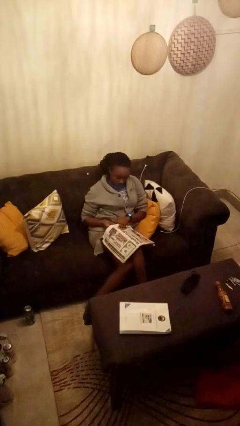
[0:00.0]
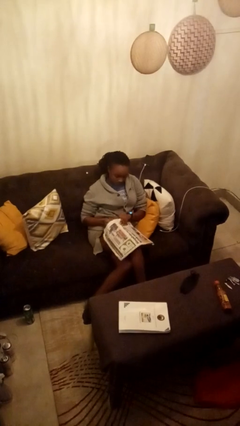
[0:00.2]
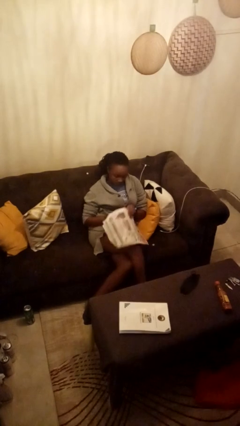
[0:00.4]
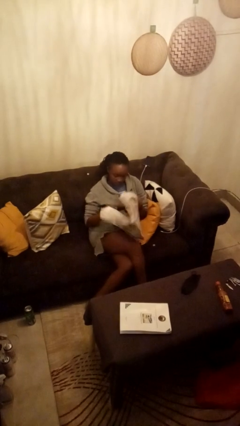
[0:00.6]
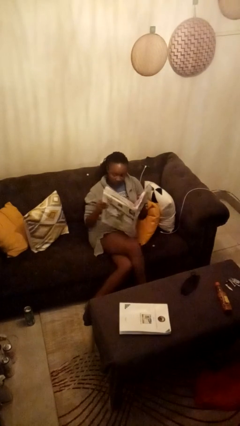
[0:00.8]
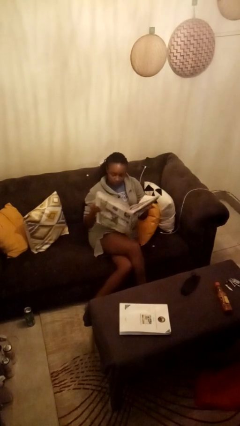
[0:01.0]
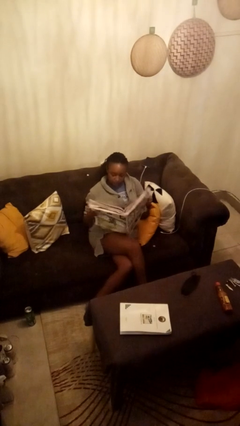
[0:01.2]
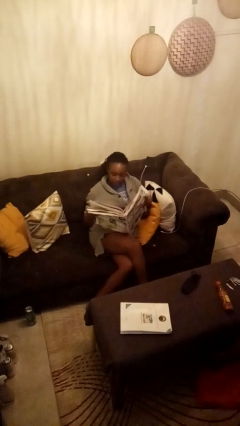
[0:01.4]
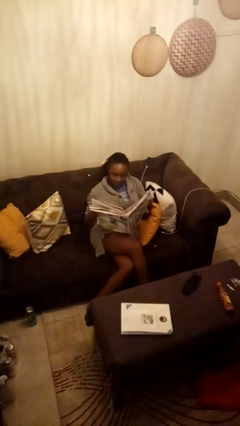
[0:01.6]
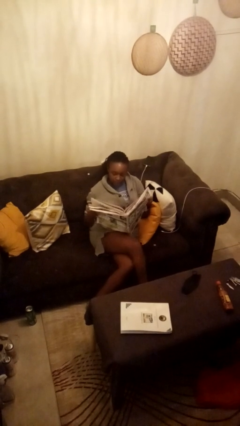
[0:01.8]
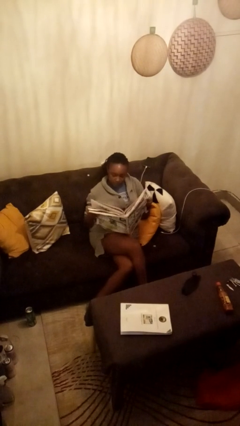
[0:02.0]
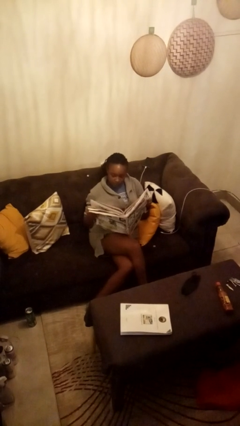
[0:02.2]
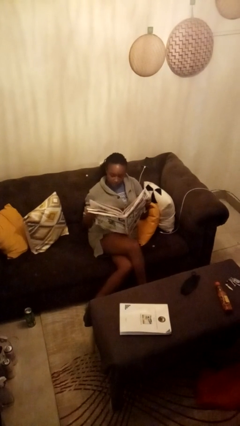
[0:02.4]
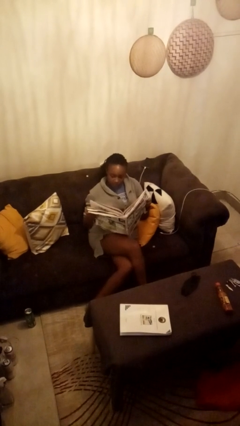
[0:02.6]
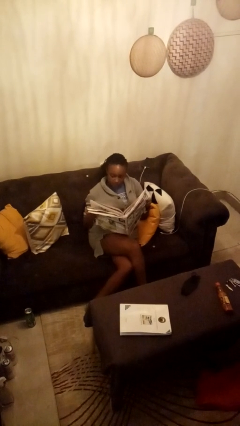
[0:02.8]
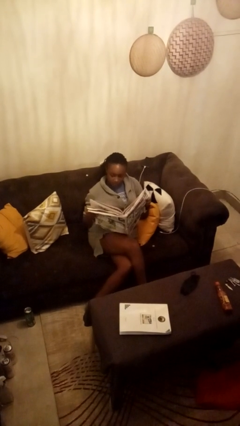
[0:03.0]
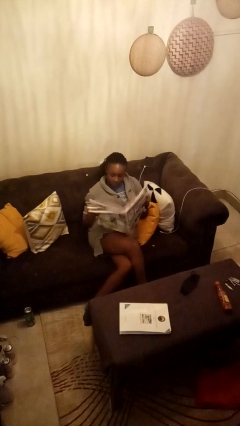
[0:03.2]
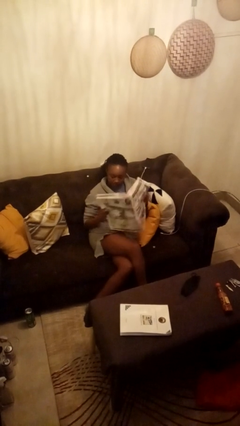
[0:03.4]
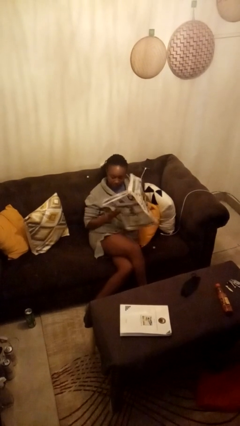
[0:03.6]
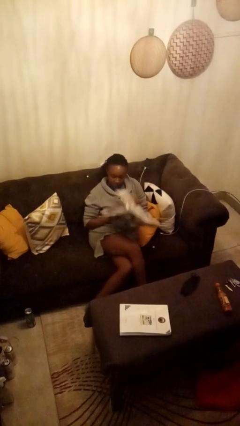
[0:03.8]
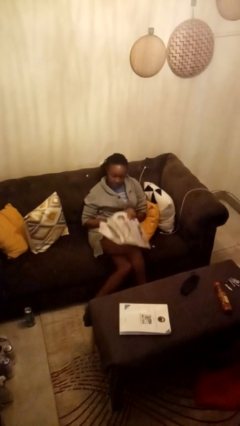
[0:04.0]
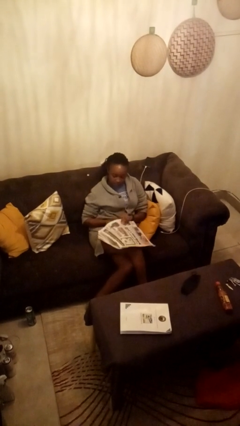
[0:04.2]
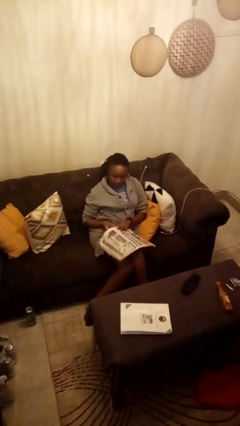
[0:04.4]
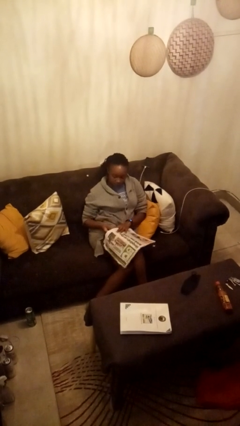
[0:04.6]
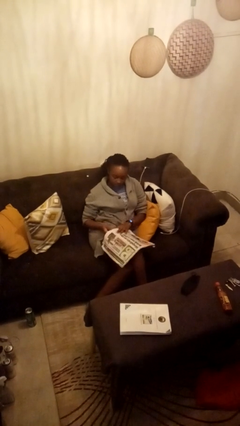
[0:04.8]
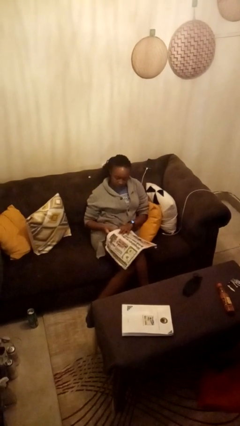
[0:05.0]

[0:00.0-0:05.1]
person reads newspaper

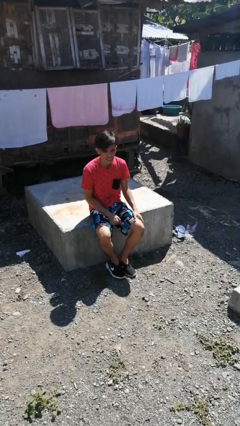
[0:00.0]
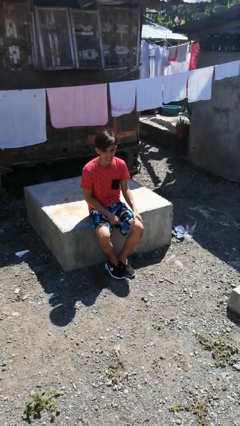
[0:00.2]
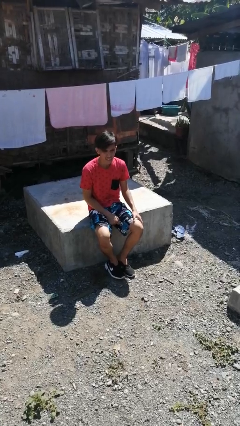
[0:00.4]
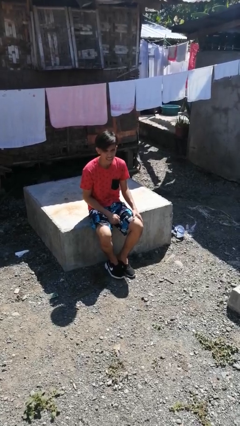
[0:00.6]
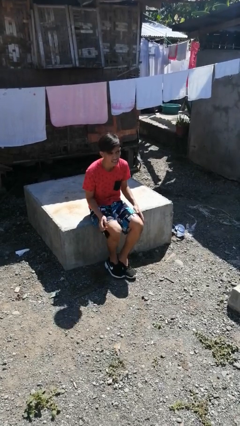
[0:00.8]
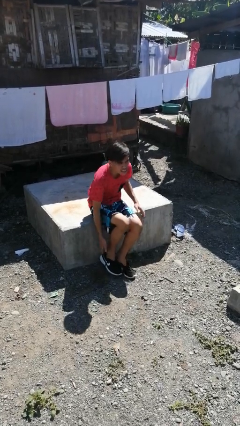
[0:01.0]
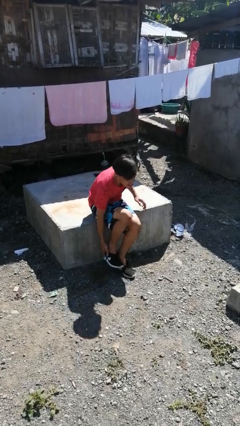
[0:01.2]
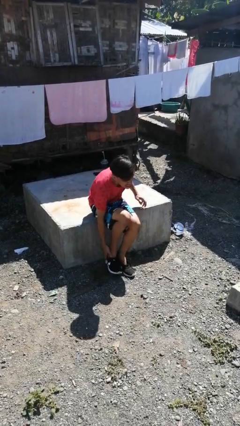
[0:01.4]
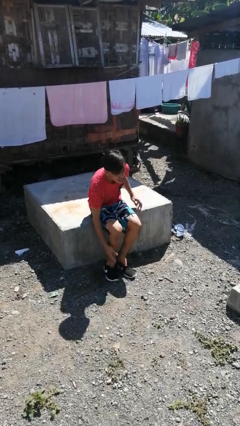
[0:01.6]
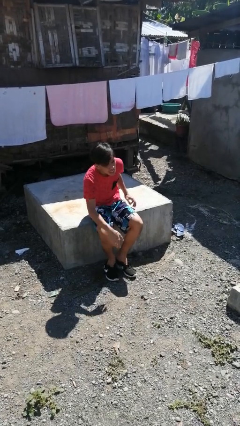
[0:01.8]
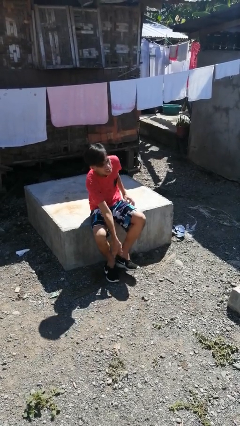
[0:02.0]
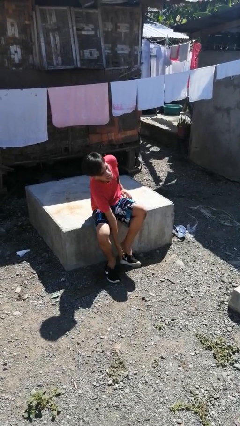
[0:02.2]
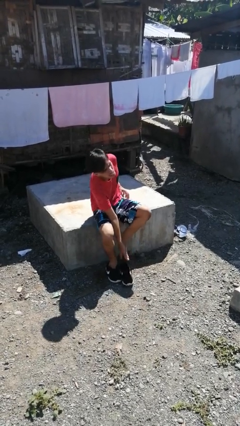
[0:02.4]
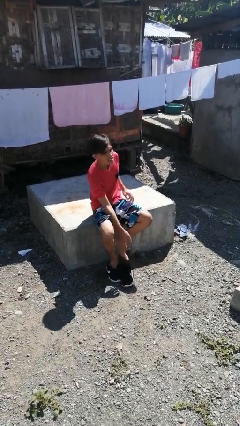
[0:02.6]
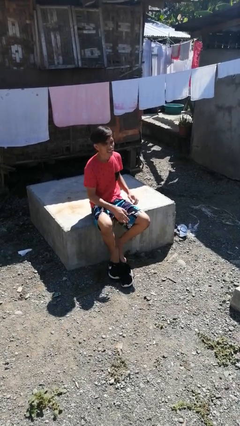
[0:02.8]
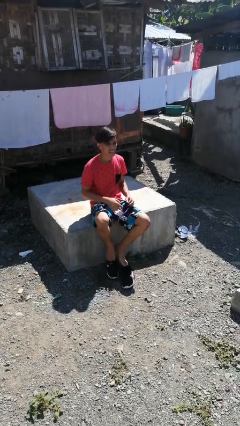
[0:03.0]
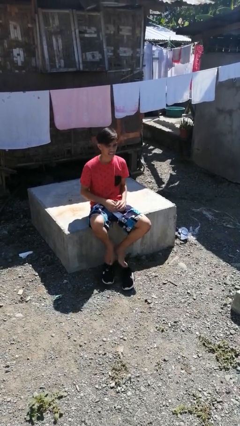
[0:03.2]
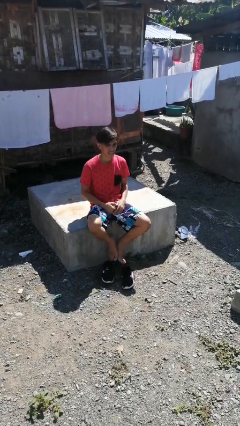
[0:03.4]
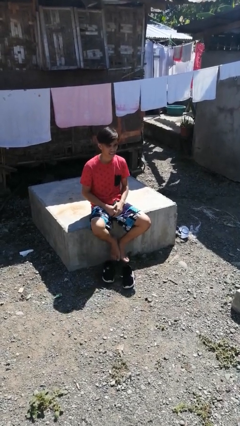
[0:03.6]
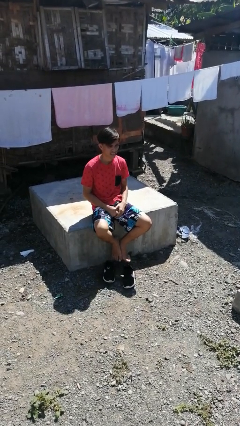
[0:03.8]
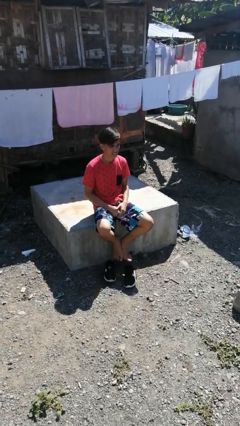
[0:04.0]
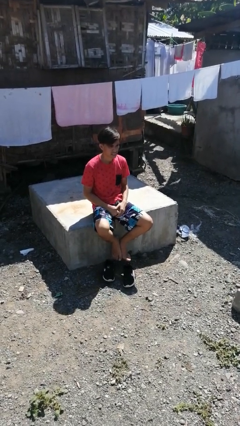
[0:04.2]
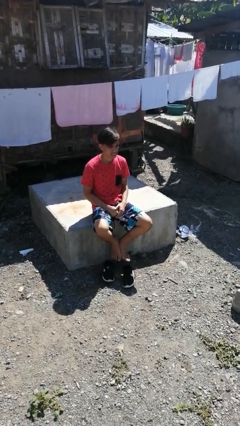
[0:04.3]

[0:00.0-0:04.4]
person takes off shoes

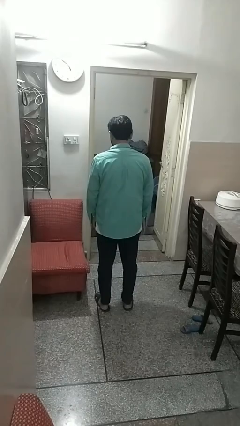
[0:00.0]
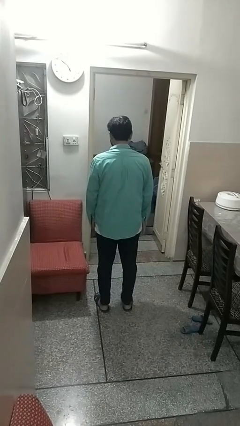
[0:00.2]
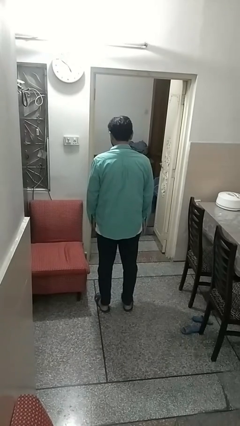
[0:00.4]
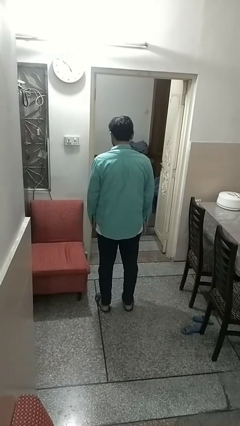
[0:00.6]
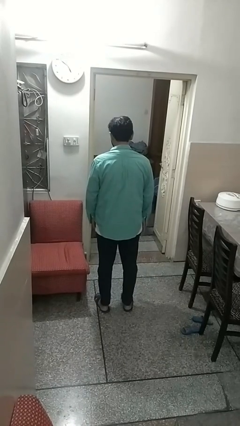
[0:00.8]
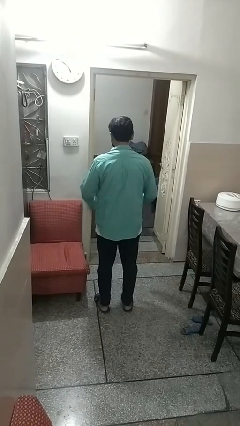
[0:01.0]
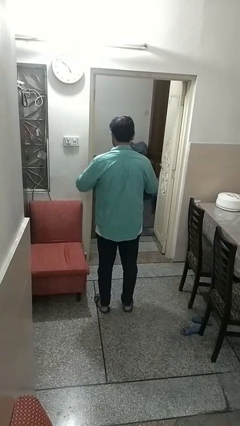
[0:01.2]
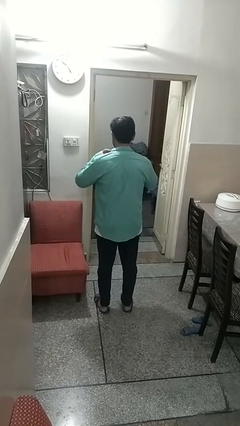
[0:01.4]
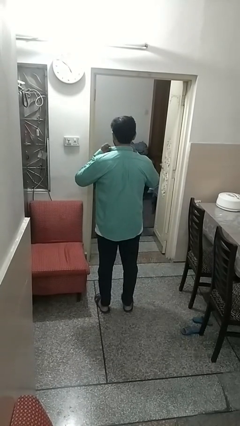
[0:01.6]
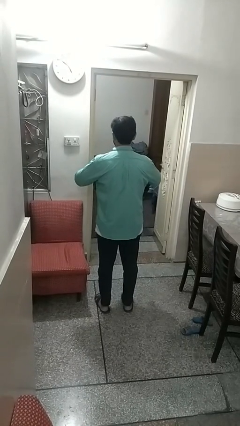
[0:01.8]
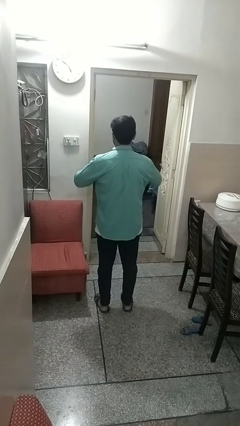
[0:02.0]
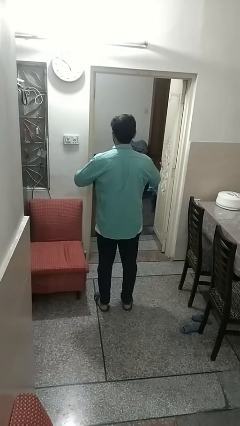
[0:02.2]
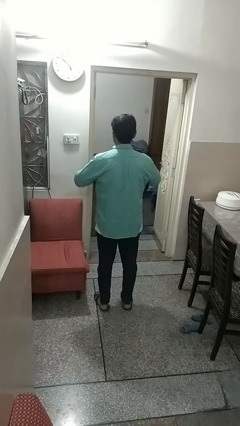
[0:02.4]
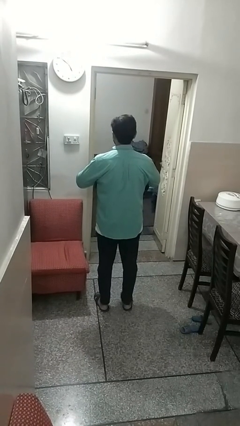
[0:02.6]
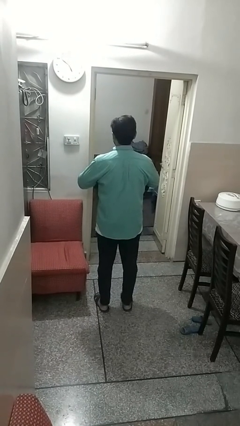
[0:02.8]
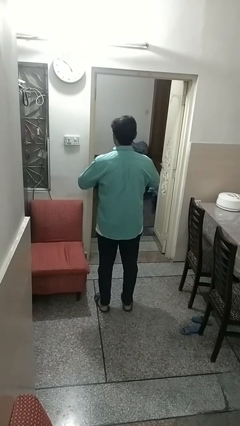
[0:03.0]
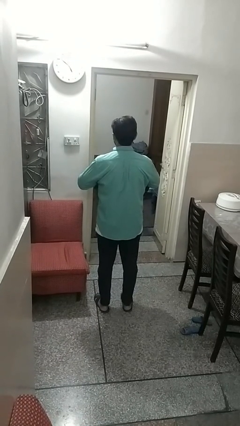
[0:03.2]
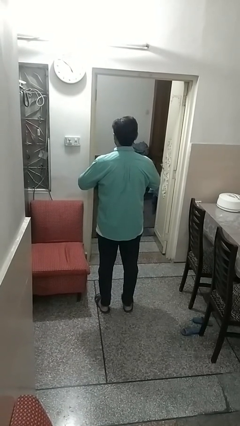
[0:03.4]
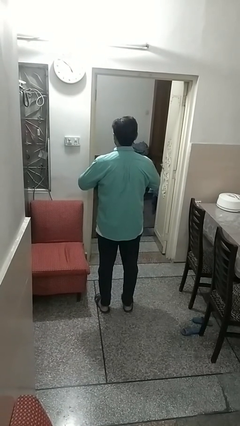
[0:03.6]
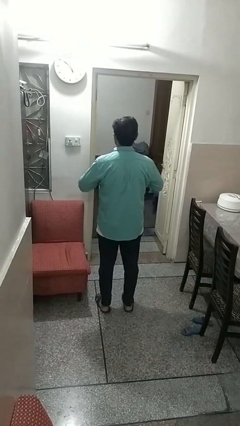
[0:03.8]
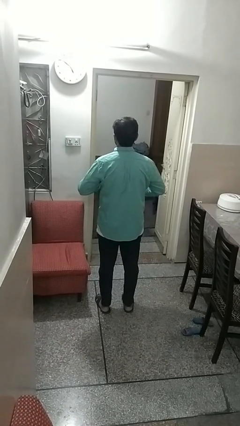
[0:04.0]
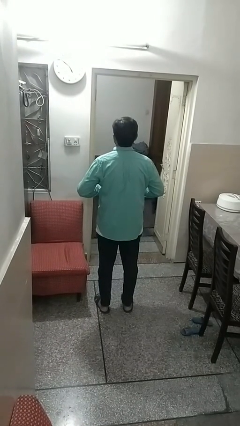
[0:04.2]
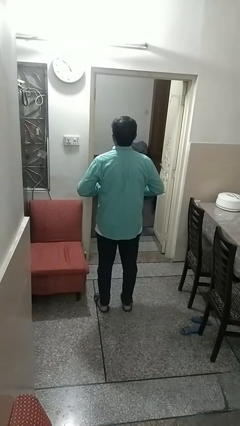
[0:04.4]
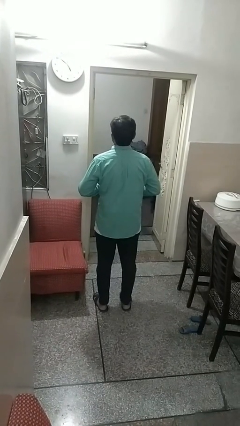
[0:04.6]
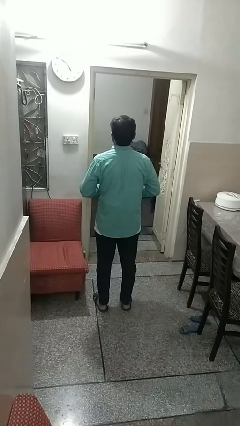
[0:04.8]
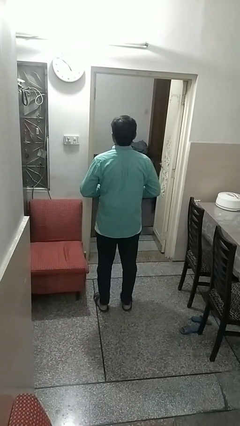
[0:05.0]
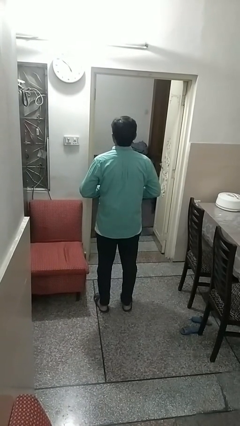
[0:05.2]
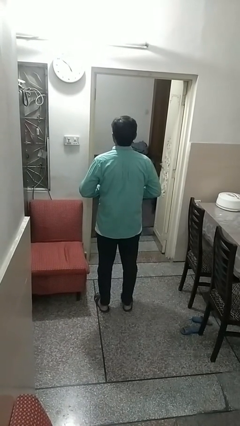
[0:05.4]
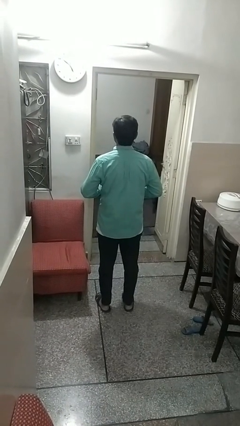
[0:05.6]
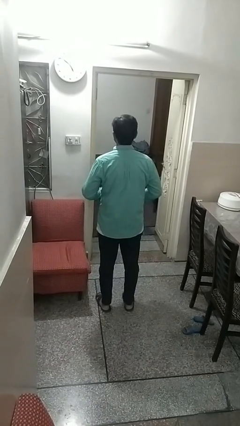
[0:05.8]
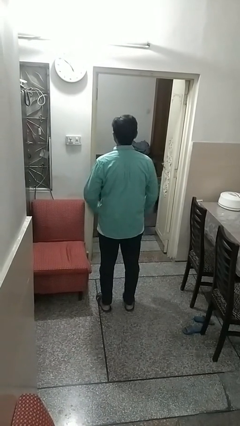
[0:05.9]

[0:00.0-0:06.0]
person buttons shirt

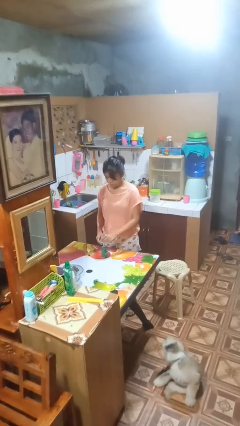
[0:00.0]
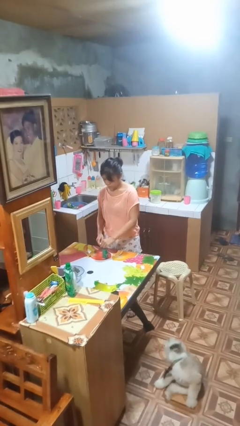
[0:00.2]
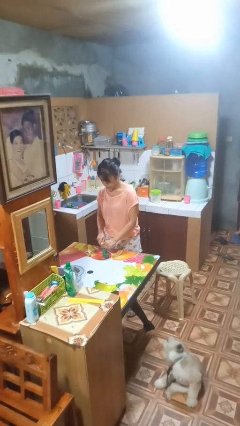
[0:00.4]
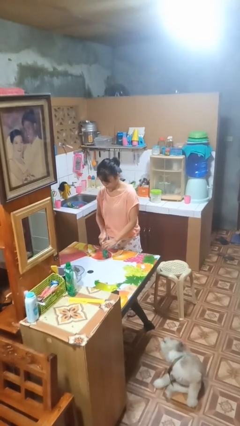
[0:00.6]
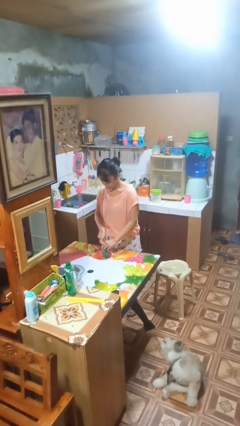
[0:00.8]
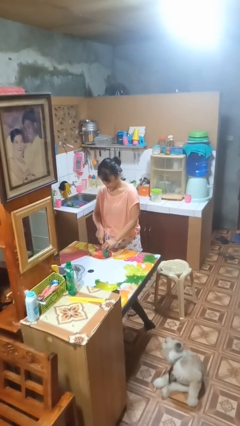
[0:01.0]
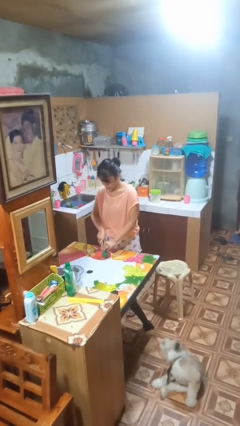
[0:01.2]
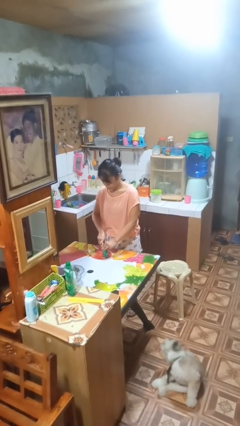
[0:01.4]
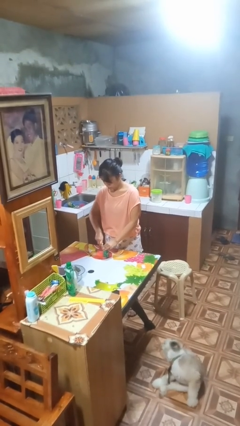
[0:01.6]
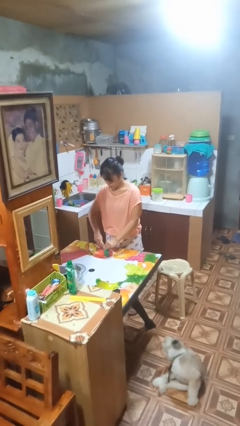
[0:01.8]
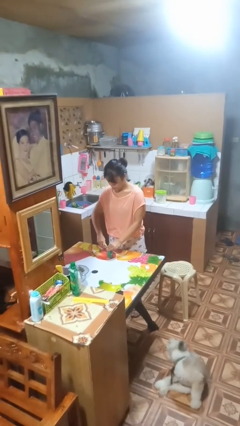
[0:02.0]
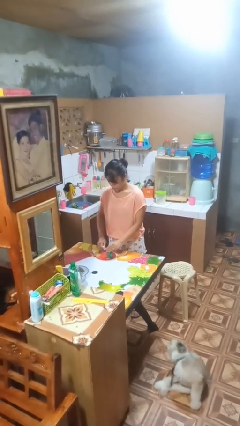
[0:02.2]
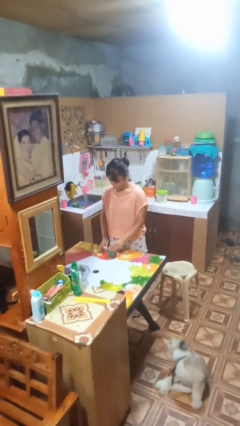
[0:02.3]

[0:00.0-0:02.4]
person opens can with can opener
